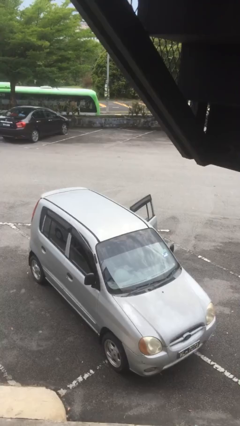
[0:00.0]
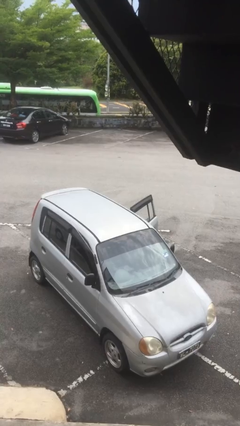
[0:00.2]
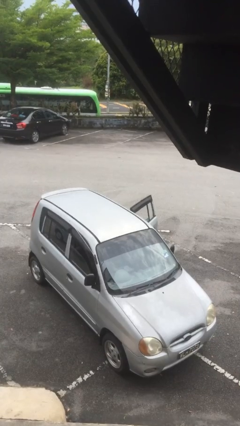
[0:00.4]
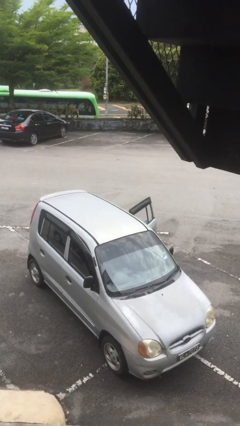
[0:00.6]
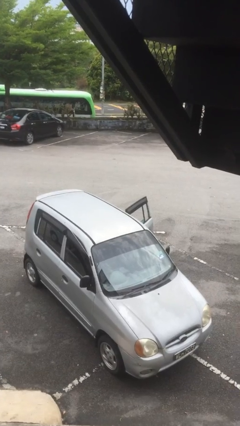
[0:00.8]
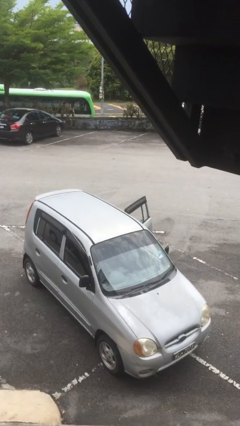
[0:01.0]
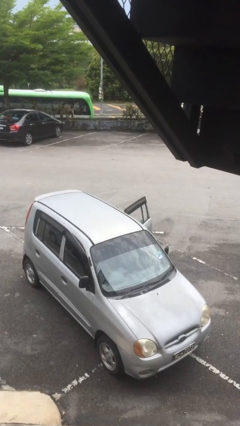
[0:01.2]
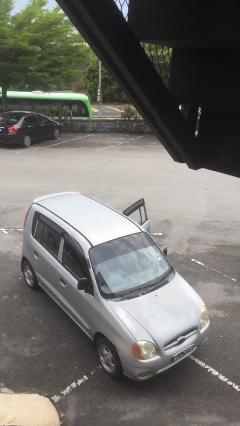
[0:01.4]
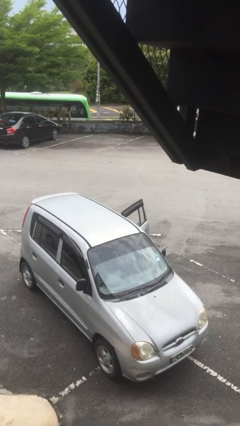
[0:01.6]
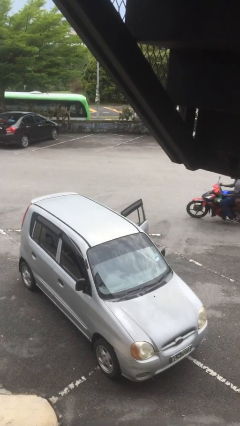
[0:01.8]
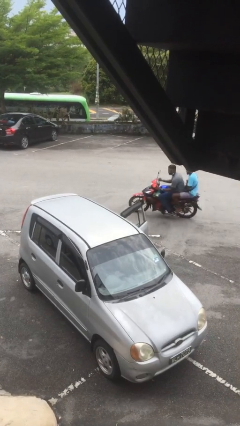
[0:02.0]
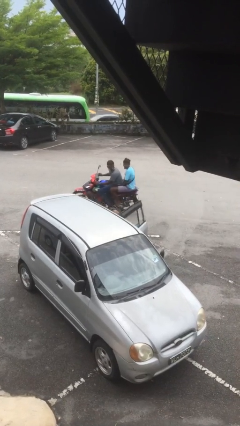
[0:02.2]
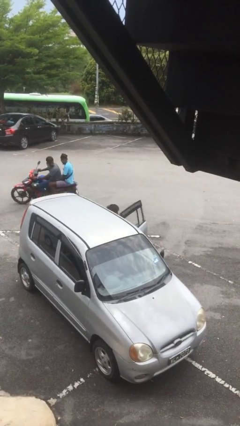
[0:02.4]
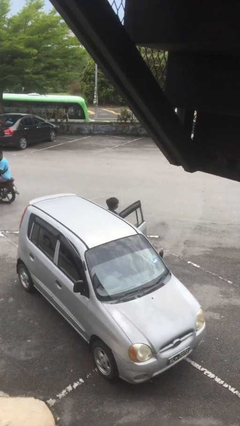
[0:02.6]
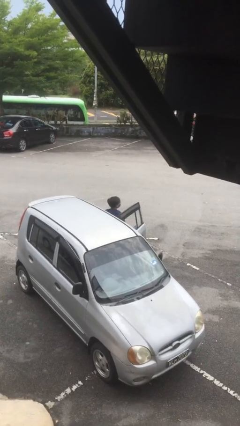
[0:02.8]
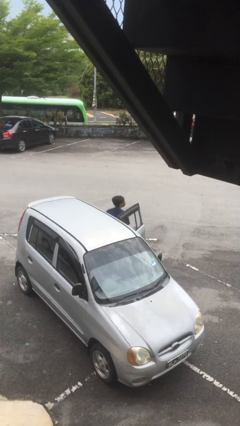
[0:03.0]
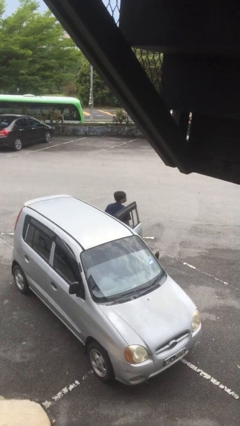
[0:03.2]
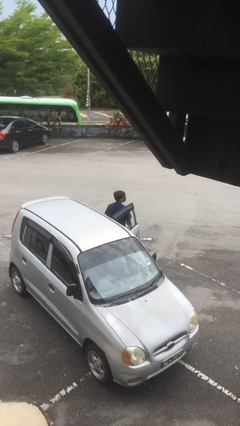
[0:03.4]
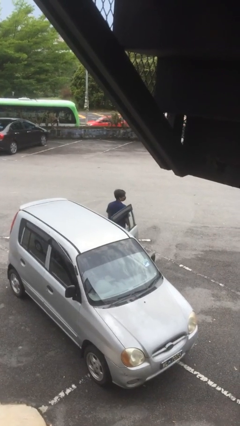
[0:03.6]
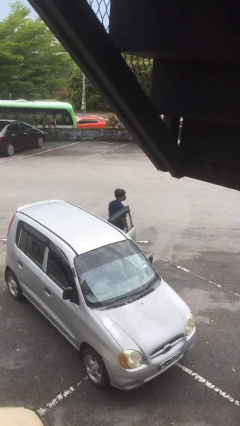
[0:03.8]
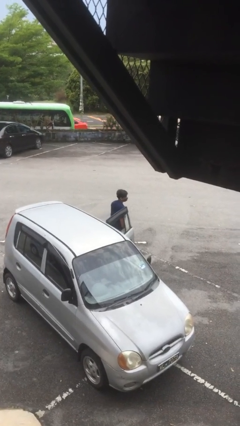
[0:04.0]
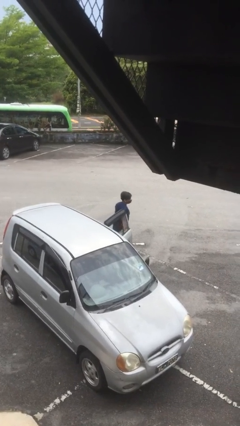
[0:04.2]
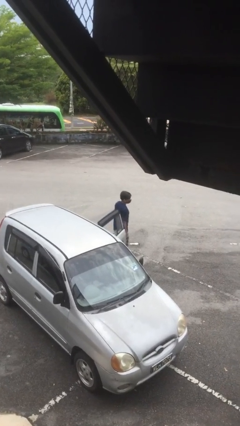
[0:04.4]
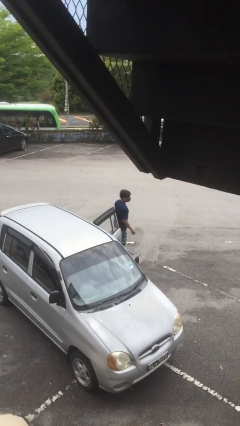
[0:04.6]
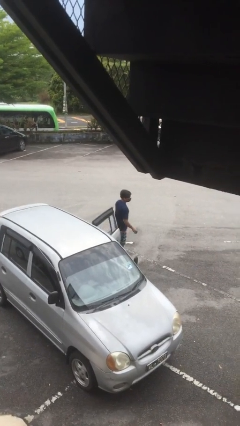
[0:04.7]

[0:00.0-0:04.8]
person exits car

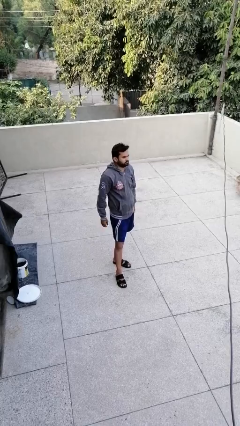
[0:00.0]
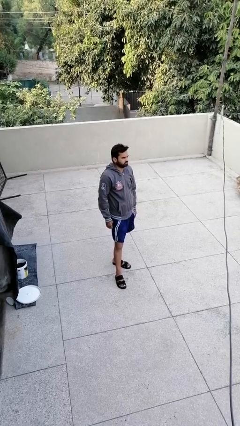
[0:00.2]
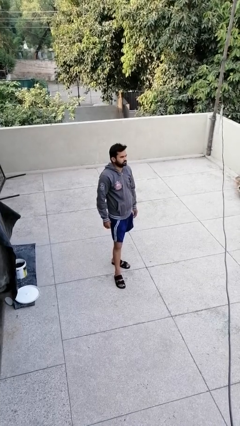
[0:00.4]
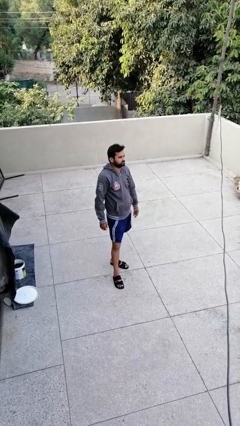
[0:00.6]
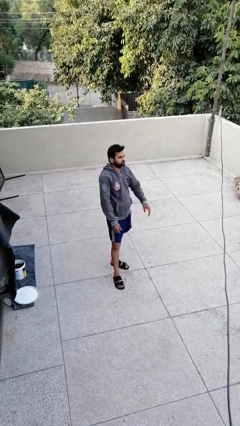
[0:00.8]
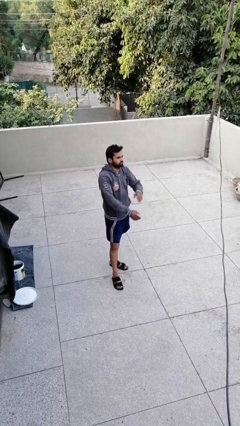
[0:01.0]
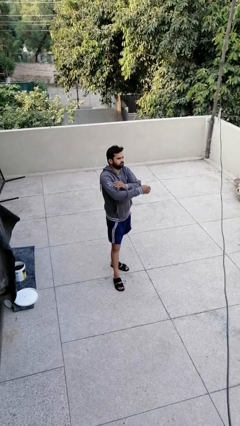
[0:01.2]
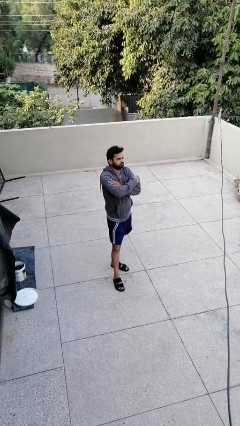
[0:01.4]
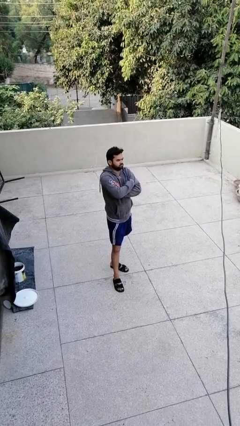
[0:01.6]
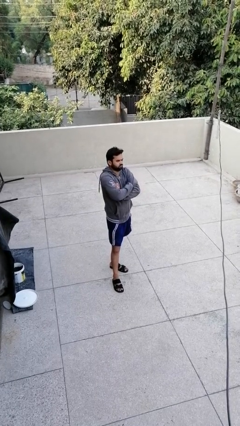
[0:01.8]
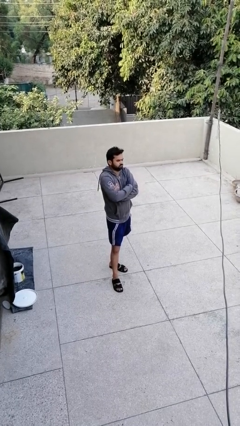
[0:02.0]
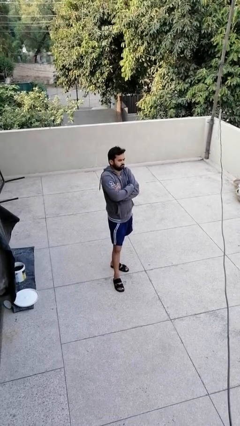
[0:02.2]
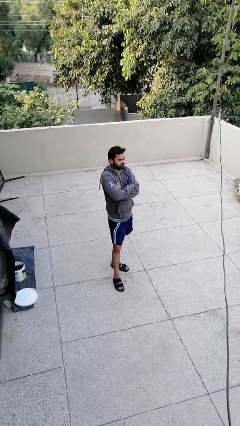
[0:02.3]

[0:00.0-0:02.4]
person crosses arms

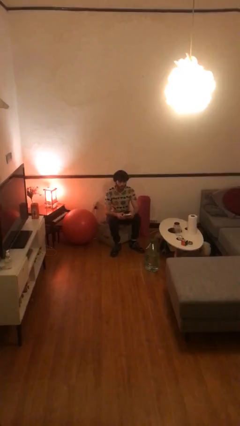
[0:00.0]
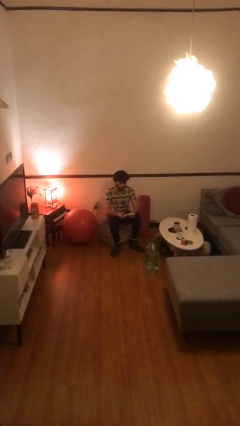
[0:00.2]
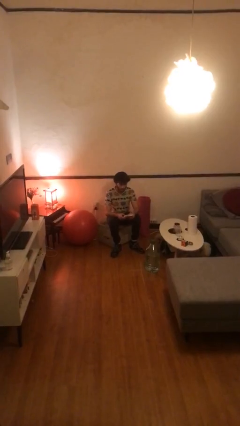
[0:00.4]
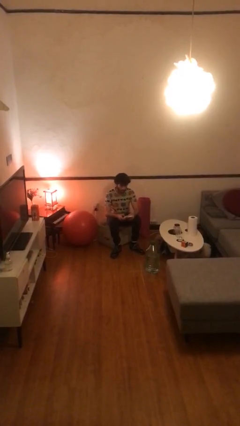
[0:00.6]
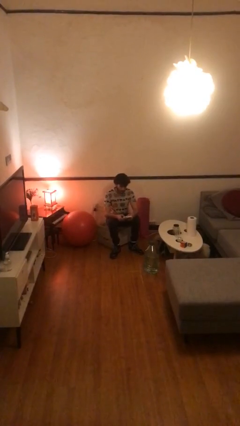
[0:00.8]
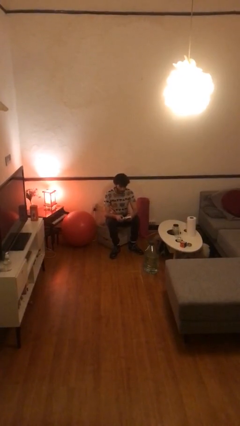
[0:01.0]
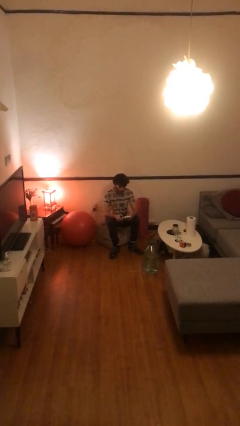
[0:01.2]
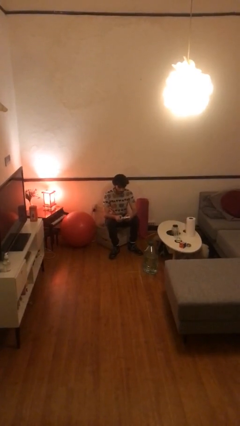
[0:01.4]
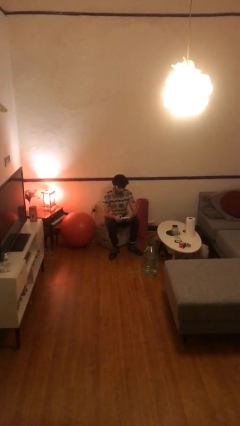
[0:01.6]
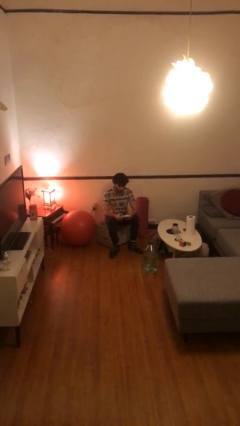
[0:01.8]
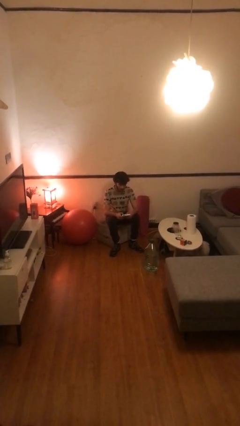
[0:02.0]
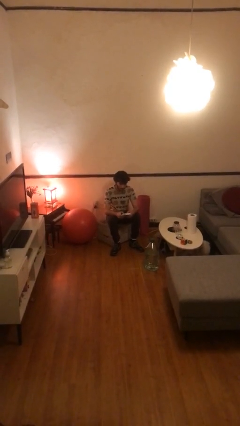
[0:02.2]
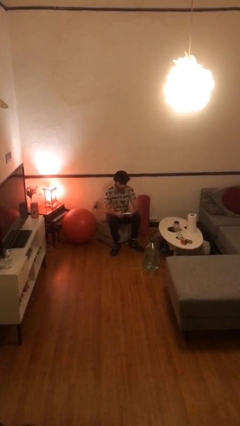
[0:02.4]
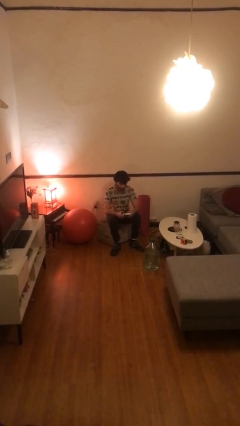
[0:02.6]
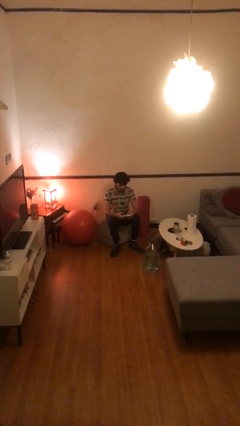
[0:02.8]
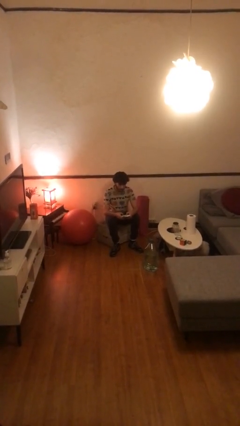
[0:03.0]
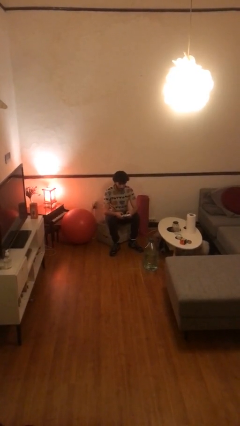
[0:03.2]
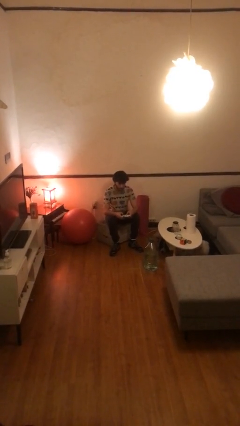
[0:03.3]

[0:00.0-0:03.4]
person interacts with handheld game

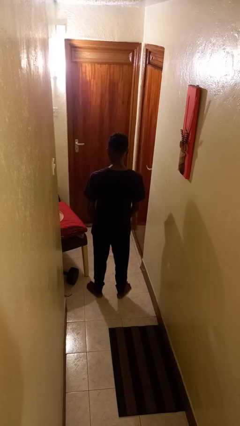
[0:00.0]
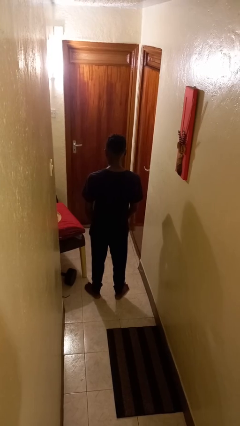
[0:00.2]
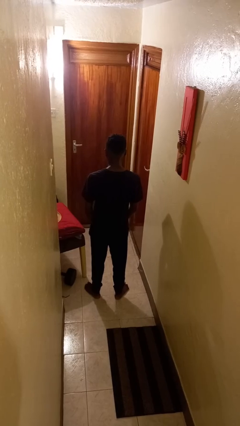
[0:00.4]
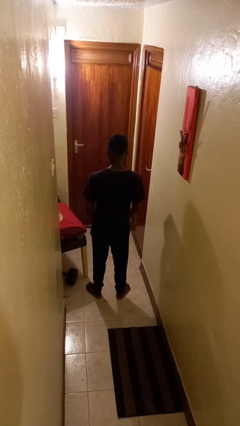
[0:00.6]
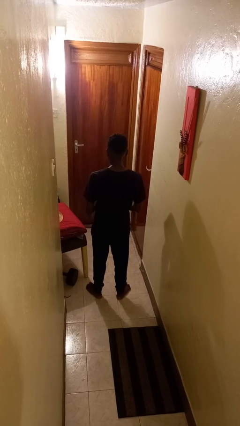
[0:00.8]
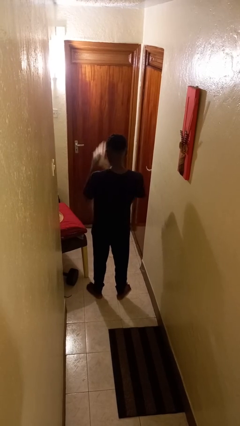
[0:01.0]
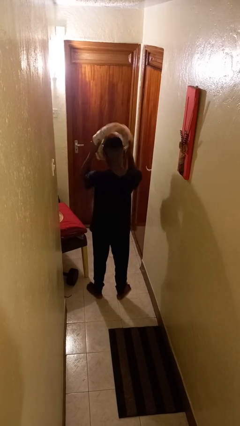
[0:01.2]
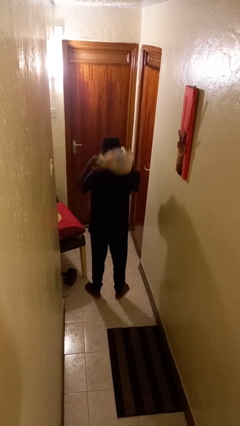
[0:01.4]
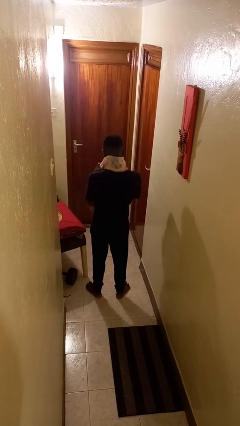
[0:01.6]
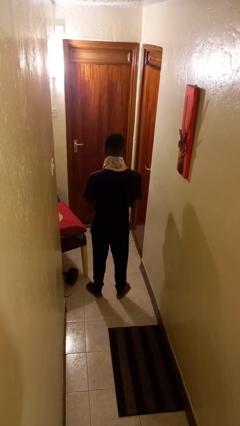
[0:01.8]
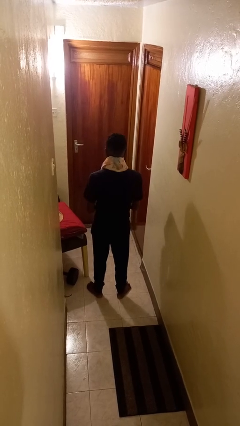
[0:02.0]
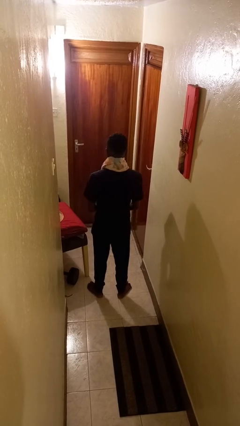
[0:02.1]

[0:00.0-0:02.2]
person puts on scarf

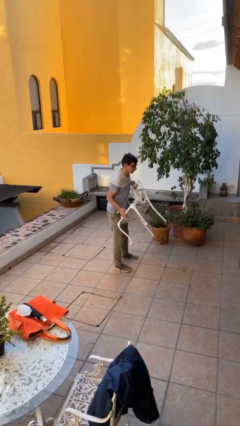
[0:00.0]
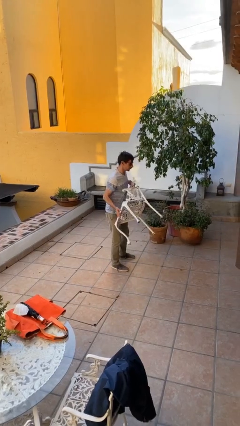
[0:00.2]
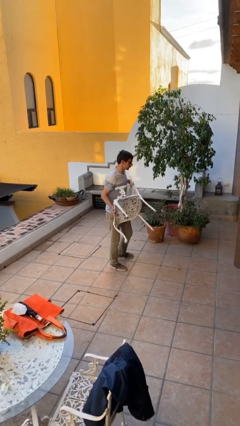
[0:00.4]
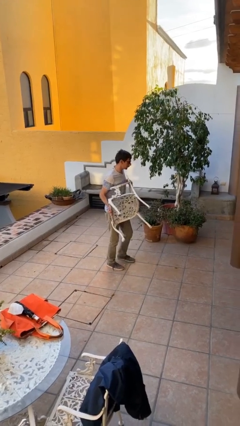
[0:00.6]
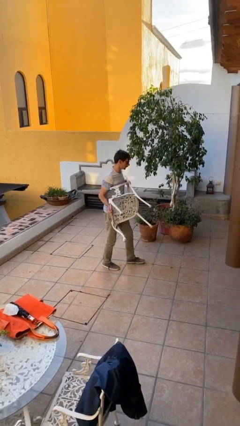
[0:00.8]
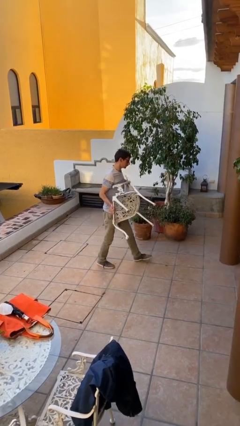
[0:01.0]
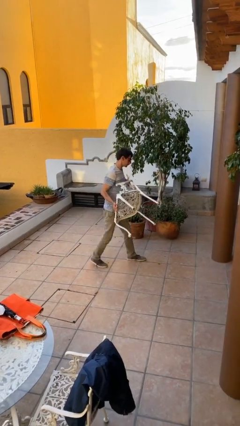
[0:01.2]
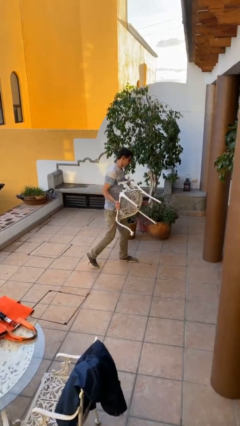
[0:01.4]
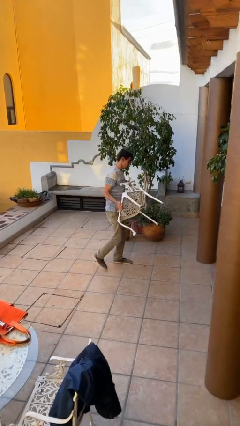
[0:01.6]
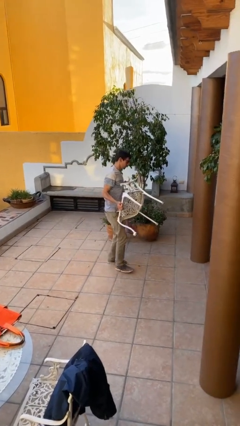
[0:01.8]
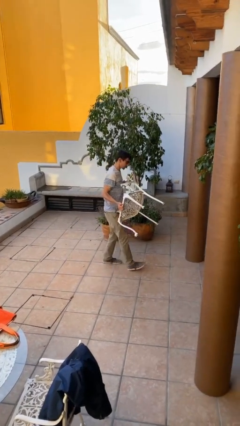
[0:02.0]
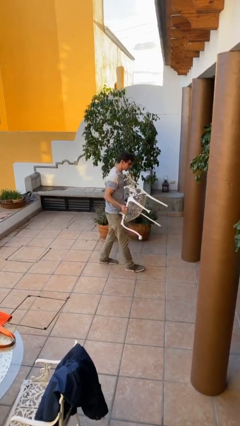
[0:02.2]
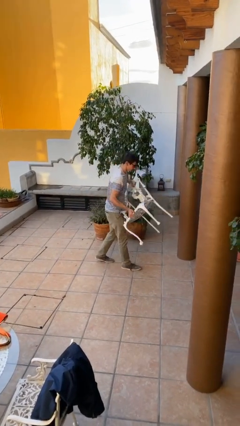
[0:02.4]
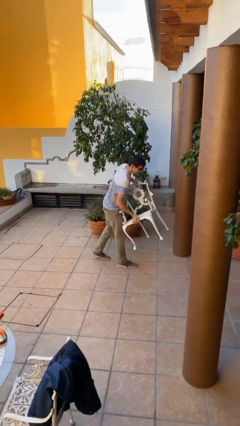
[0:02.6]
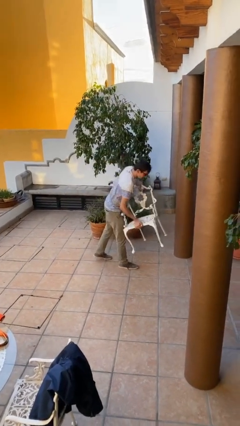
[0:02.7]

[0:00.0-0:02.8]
person carries heavy object

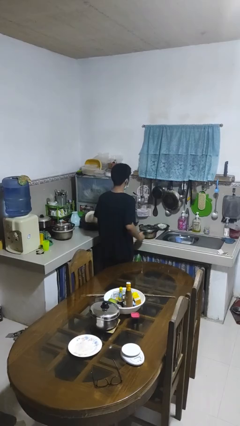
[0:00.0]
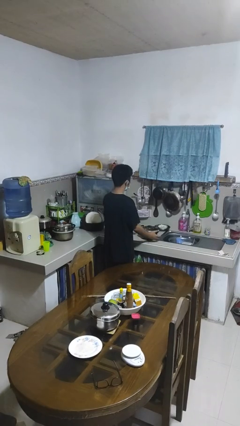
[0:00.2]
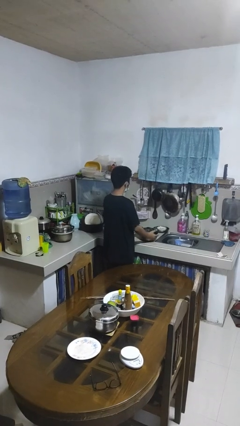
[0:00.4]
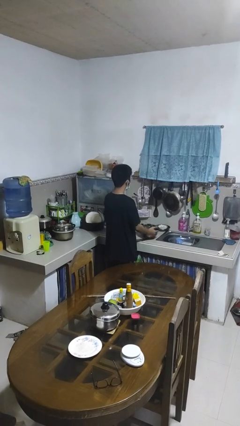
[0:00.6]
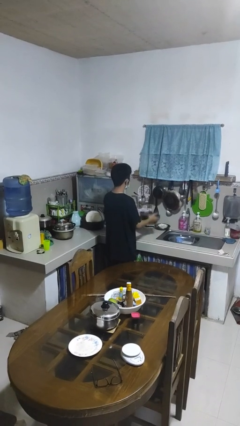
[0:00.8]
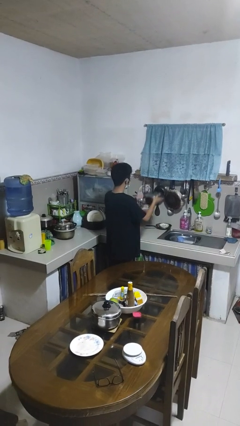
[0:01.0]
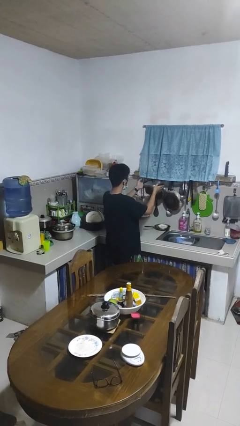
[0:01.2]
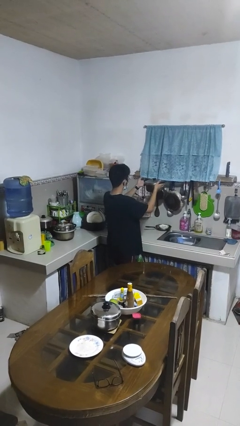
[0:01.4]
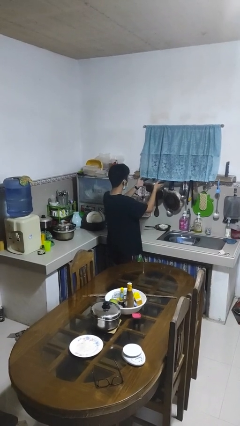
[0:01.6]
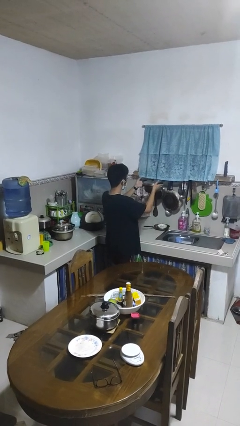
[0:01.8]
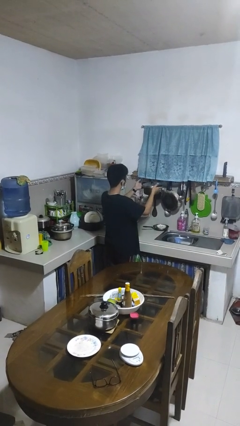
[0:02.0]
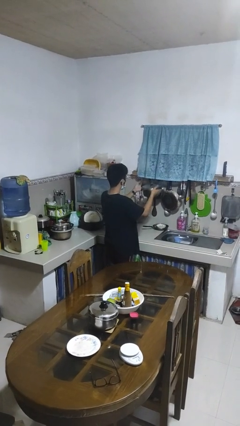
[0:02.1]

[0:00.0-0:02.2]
person picks up object from countertop
